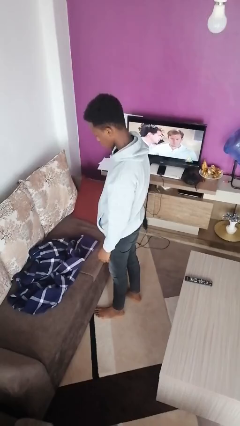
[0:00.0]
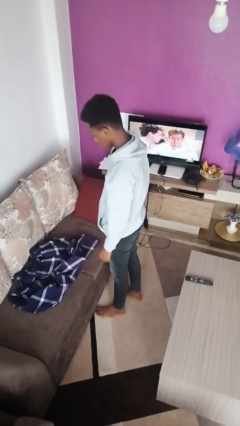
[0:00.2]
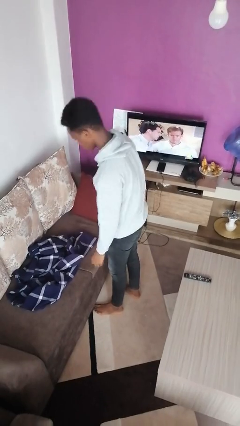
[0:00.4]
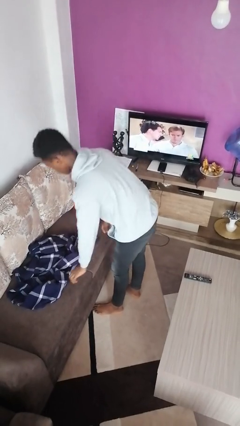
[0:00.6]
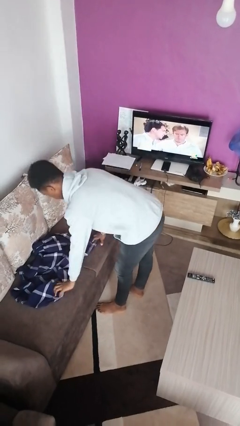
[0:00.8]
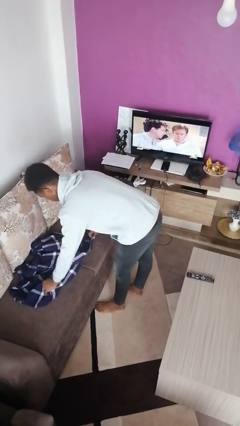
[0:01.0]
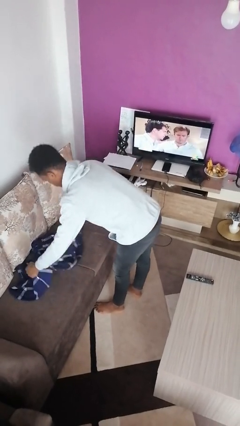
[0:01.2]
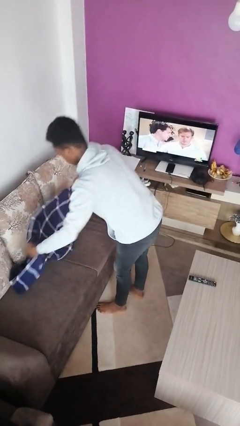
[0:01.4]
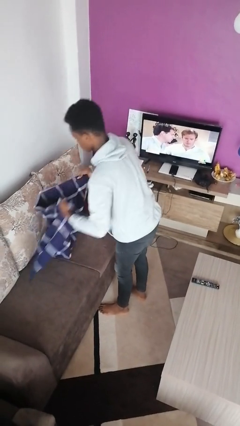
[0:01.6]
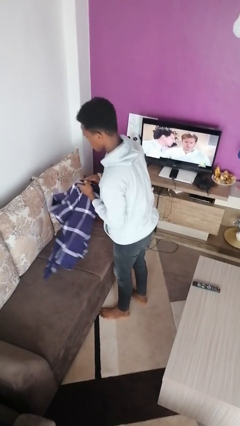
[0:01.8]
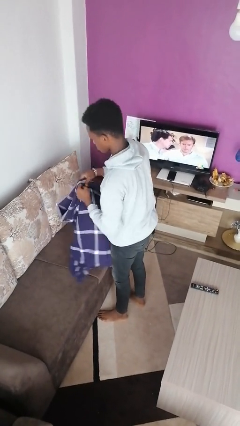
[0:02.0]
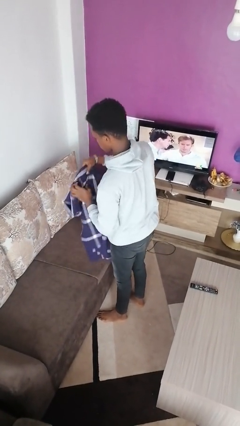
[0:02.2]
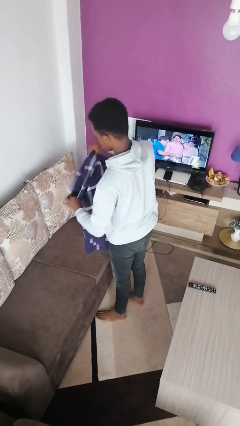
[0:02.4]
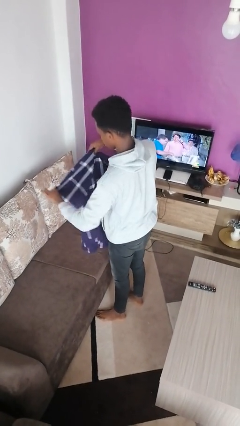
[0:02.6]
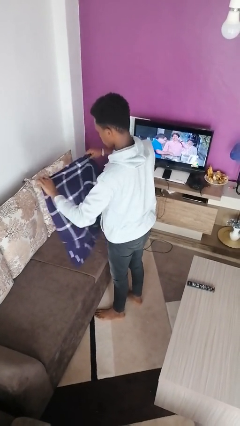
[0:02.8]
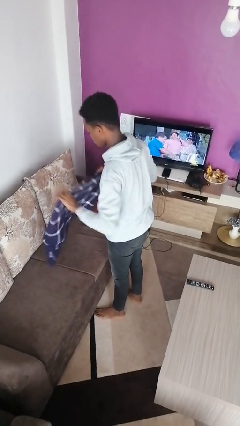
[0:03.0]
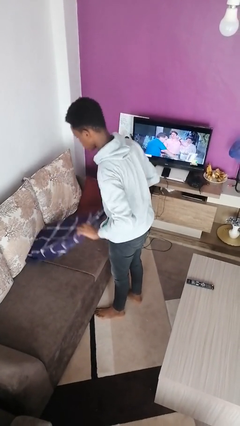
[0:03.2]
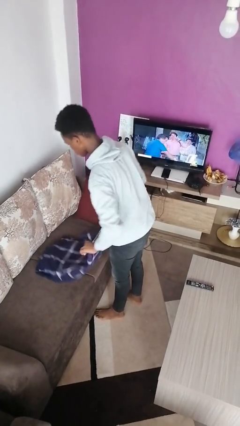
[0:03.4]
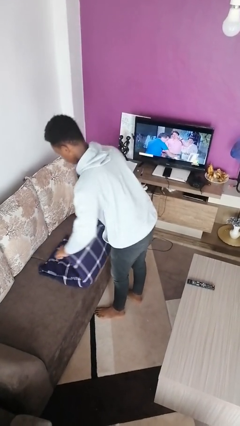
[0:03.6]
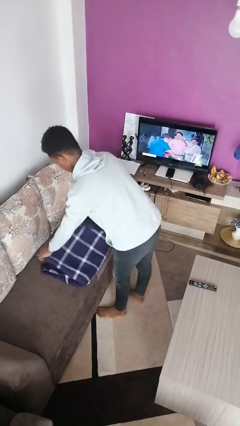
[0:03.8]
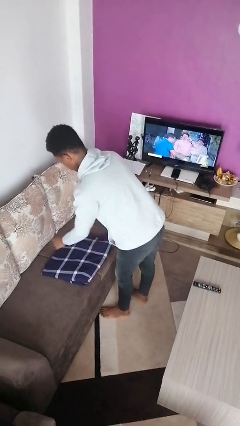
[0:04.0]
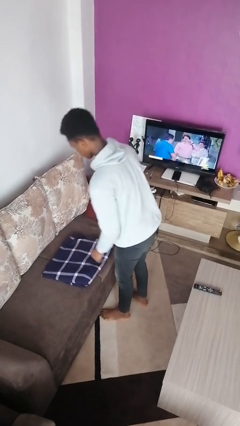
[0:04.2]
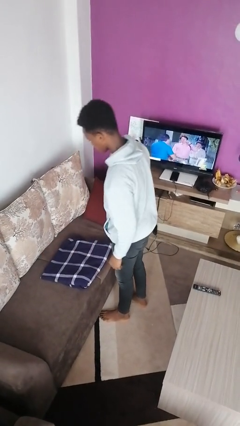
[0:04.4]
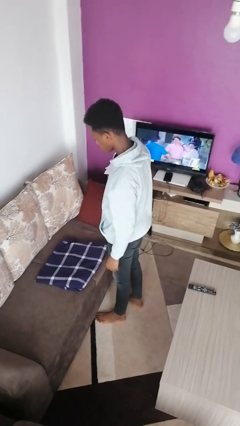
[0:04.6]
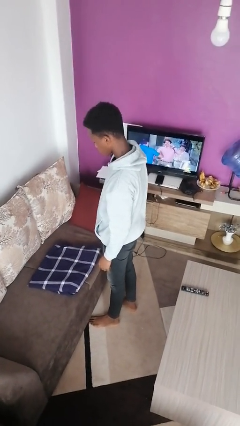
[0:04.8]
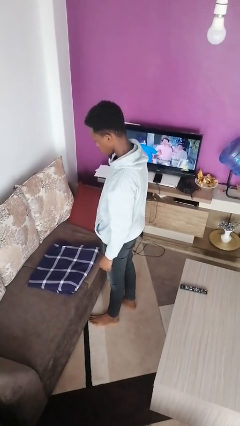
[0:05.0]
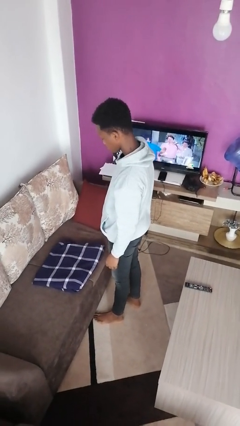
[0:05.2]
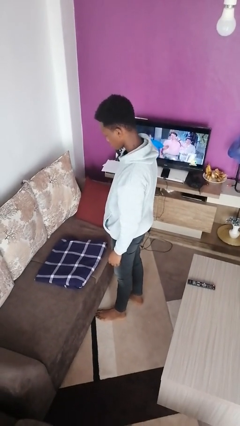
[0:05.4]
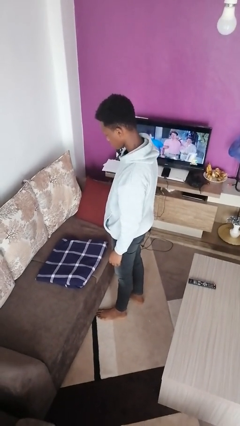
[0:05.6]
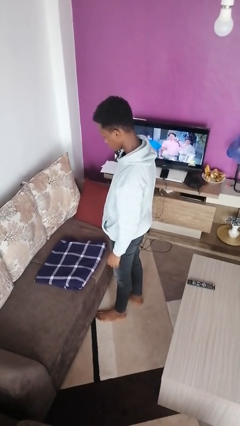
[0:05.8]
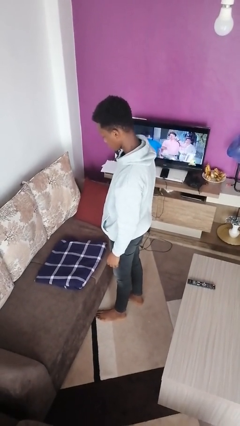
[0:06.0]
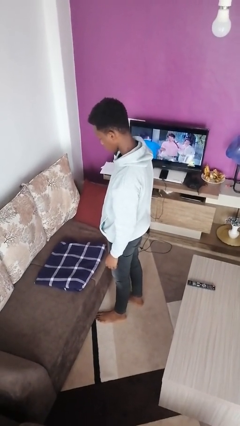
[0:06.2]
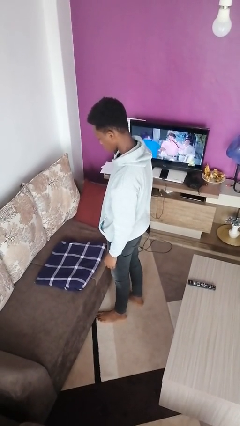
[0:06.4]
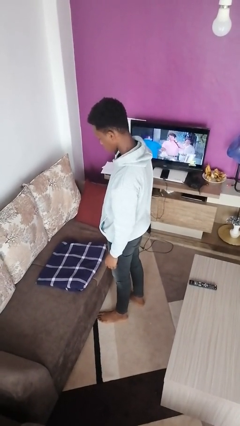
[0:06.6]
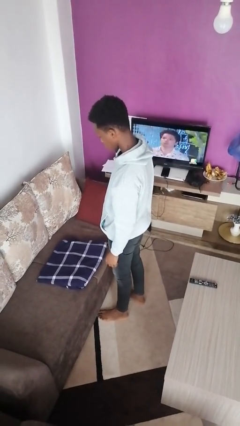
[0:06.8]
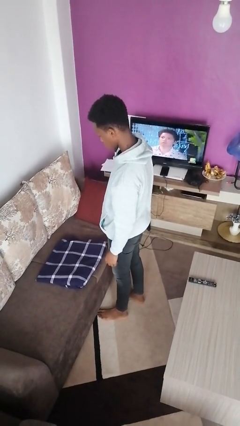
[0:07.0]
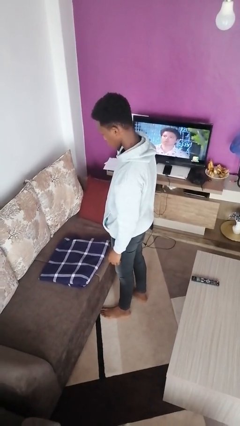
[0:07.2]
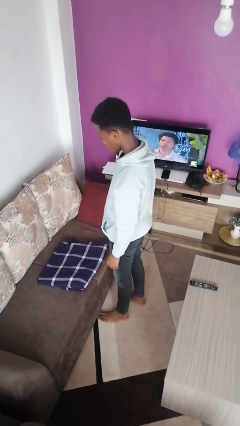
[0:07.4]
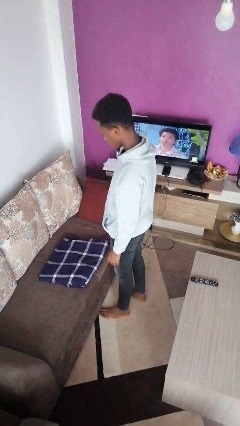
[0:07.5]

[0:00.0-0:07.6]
person folds blanket

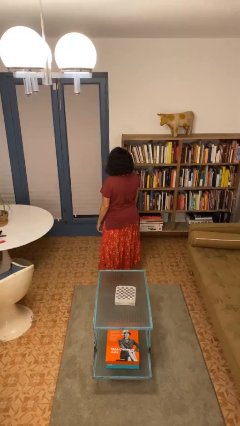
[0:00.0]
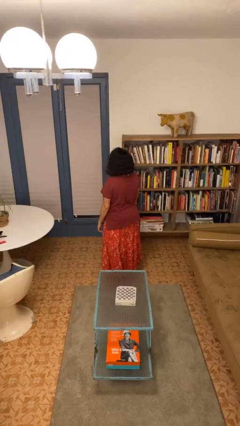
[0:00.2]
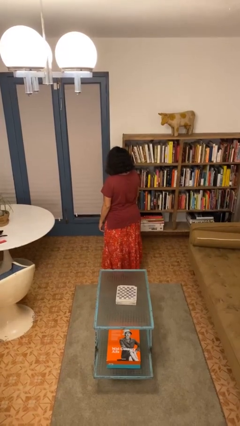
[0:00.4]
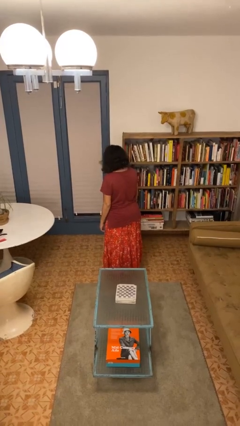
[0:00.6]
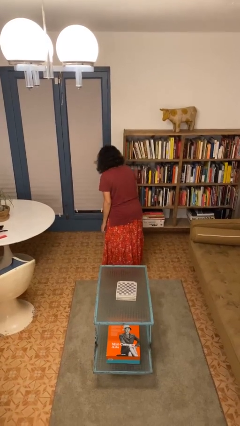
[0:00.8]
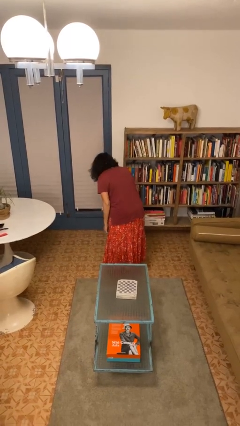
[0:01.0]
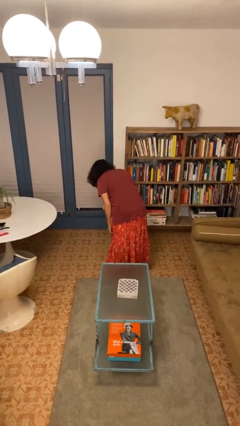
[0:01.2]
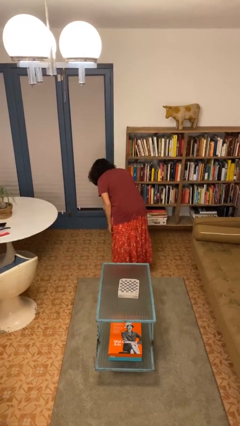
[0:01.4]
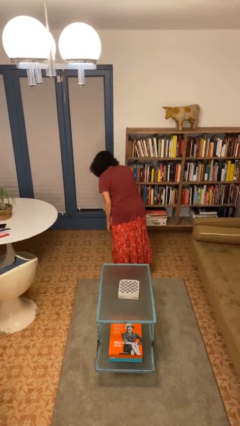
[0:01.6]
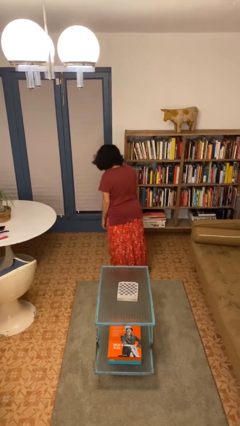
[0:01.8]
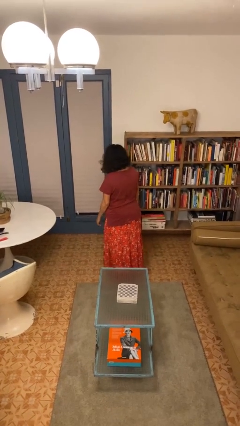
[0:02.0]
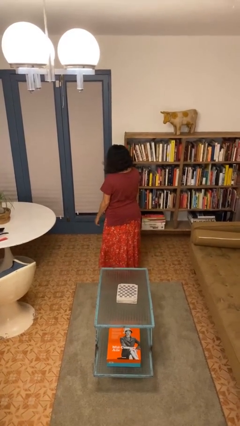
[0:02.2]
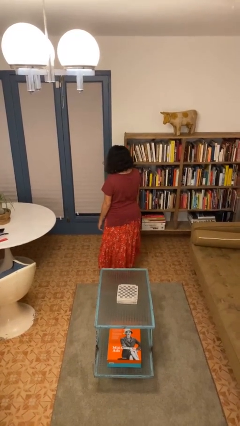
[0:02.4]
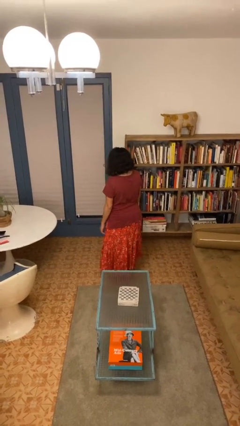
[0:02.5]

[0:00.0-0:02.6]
person bows

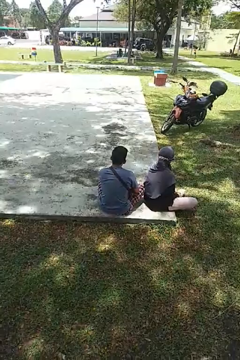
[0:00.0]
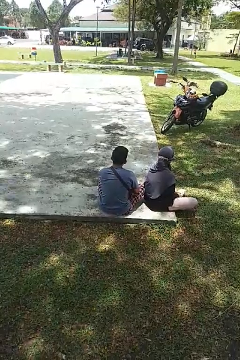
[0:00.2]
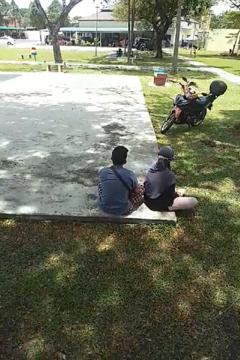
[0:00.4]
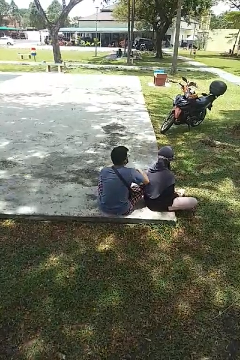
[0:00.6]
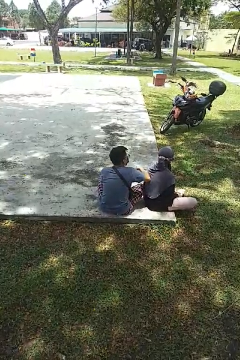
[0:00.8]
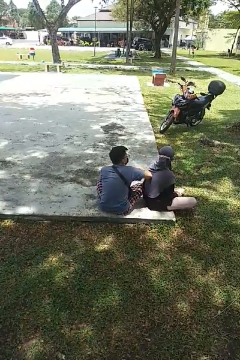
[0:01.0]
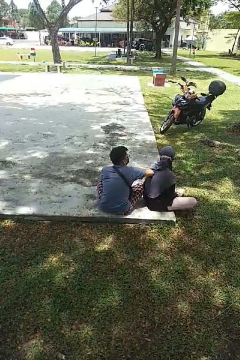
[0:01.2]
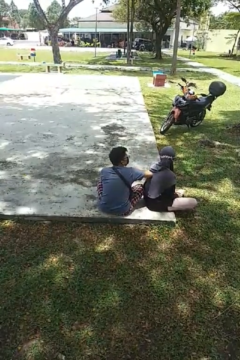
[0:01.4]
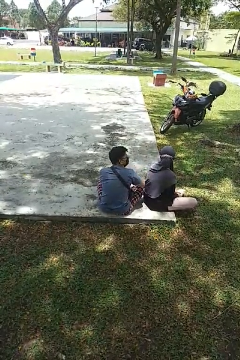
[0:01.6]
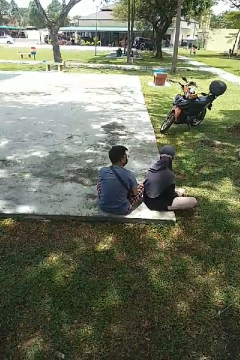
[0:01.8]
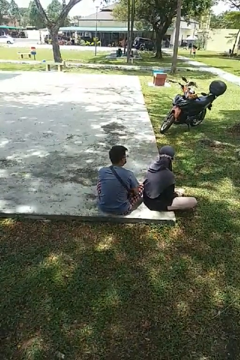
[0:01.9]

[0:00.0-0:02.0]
person nudges person with elbow

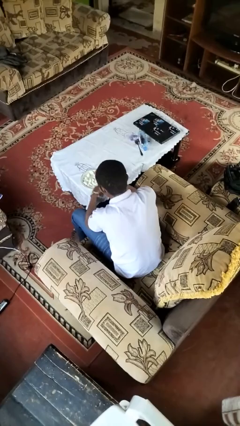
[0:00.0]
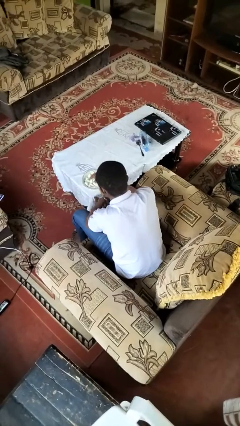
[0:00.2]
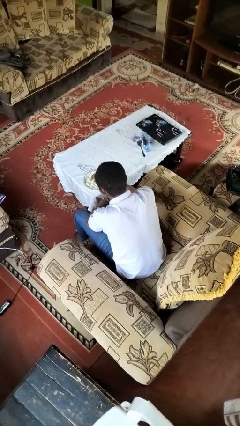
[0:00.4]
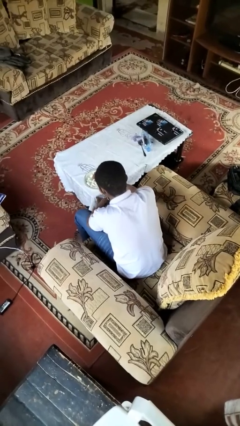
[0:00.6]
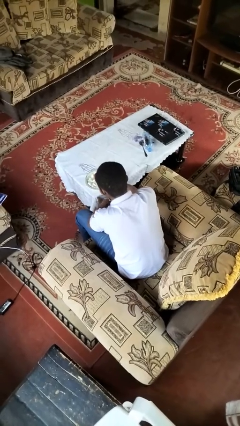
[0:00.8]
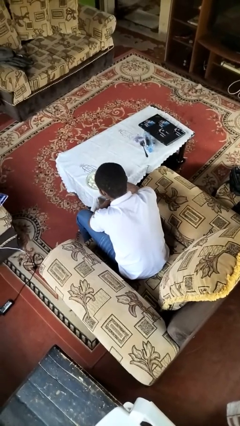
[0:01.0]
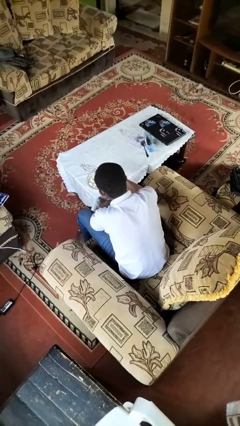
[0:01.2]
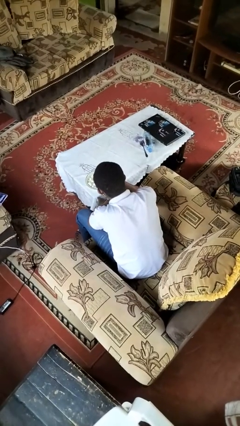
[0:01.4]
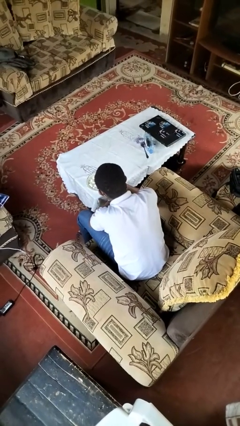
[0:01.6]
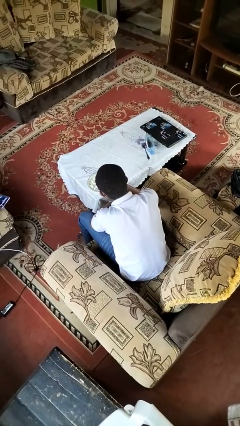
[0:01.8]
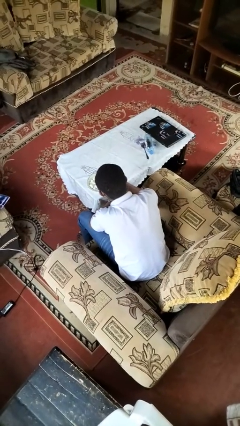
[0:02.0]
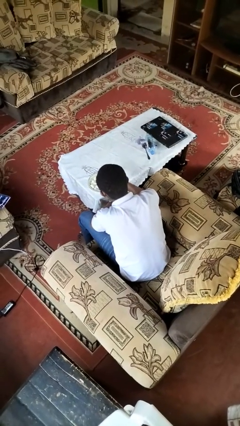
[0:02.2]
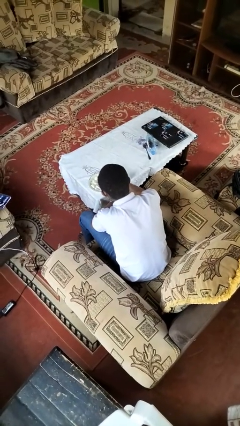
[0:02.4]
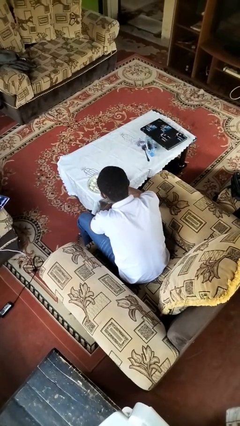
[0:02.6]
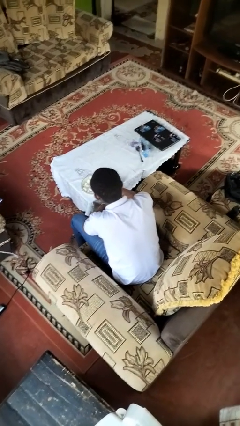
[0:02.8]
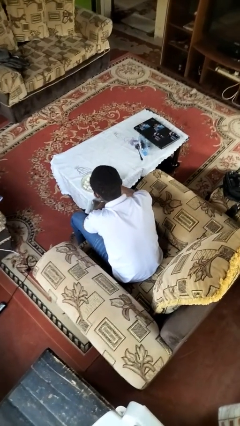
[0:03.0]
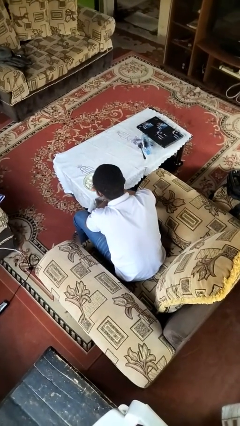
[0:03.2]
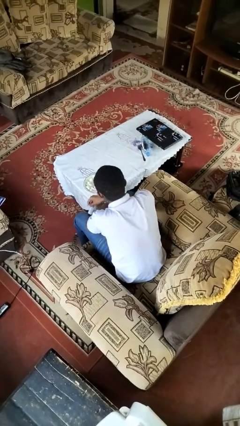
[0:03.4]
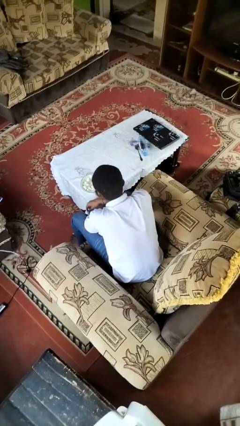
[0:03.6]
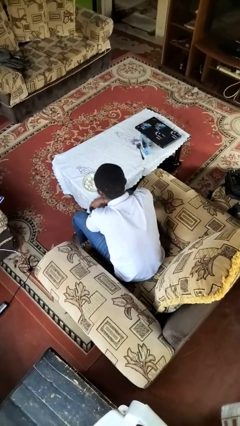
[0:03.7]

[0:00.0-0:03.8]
person eats with hands

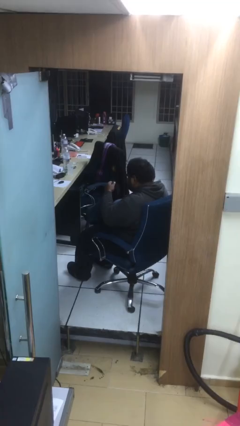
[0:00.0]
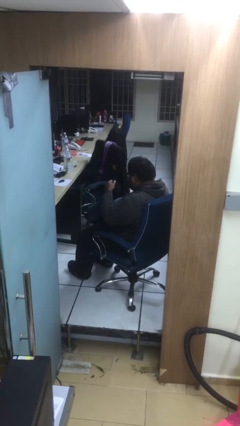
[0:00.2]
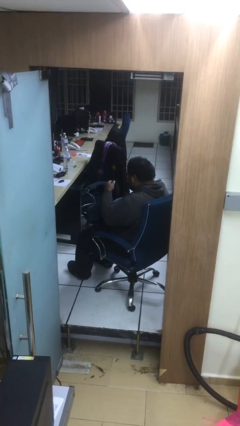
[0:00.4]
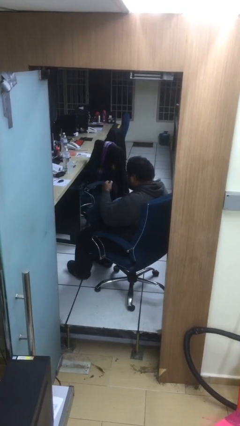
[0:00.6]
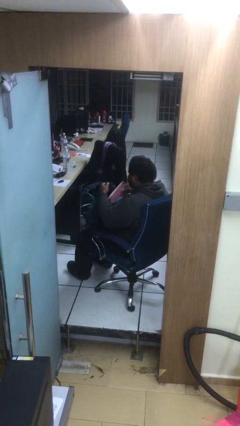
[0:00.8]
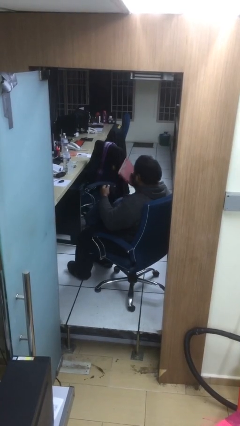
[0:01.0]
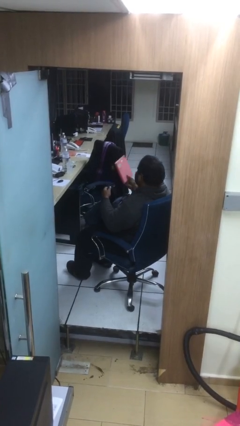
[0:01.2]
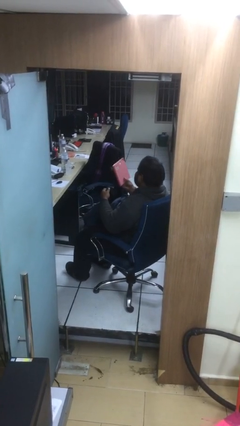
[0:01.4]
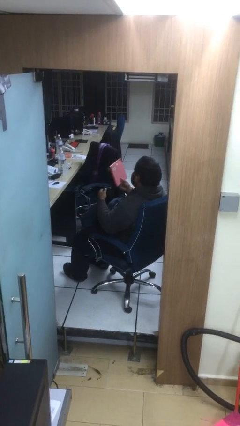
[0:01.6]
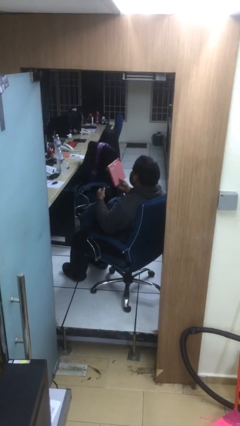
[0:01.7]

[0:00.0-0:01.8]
person takes object from backpack
